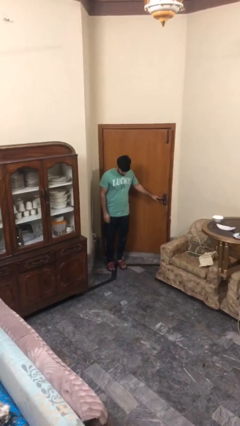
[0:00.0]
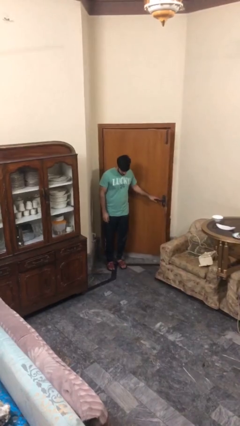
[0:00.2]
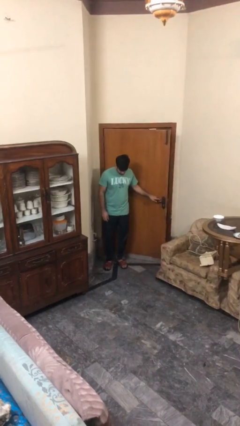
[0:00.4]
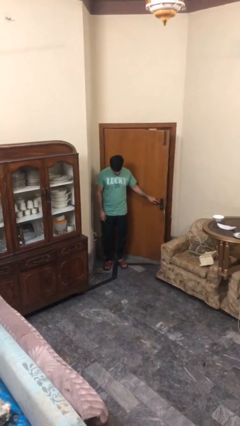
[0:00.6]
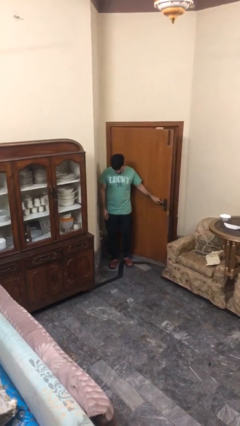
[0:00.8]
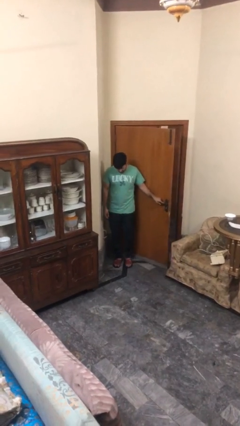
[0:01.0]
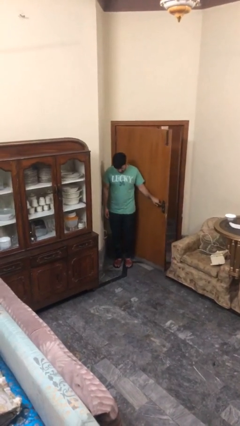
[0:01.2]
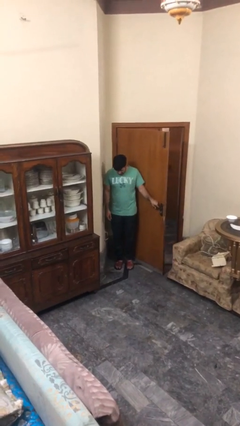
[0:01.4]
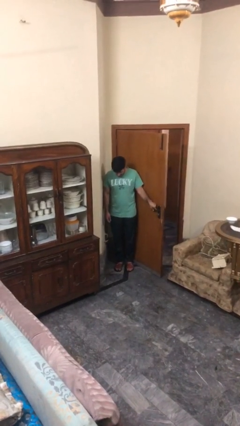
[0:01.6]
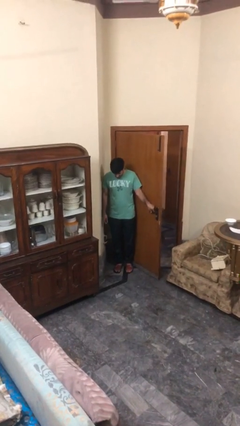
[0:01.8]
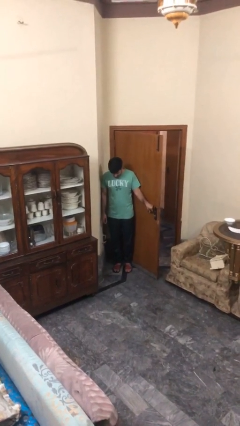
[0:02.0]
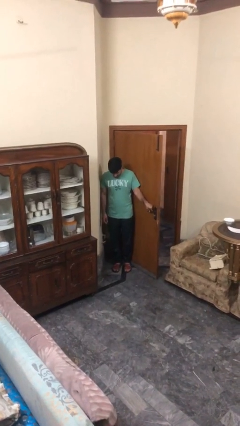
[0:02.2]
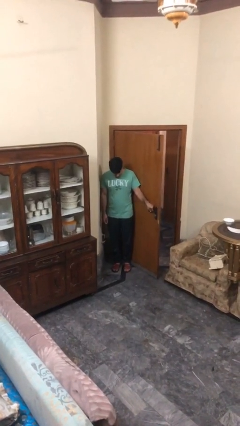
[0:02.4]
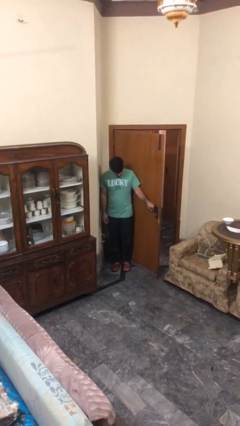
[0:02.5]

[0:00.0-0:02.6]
person opens facility door

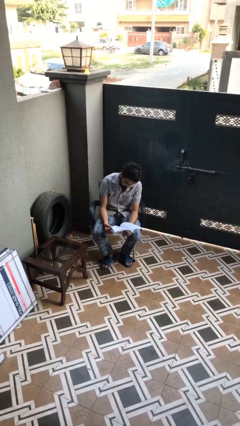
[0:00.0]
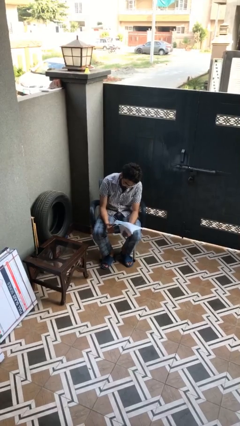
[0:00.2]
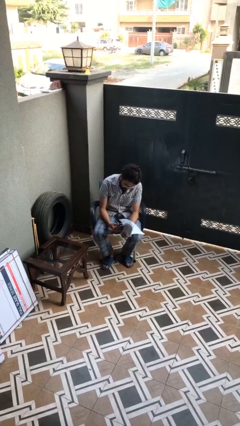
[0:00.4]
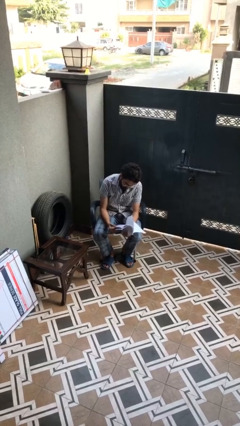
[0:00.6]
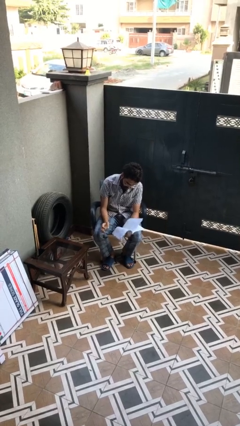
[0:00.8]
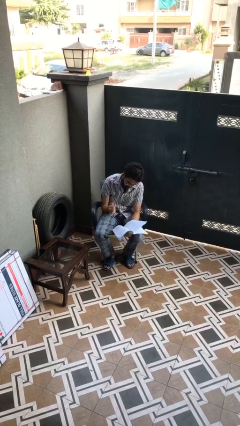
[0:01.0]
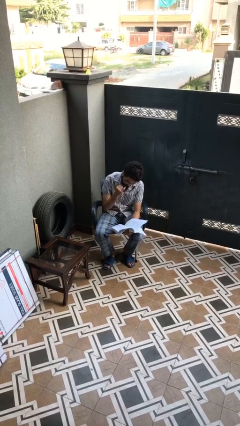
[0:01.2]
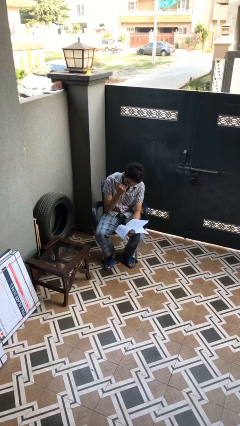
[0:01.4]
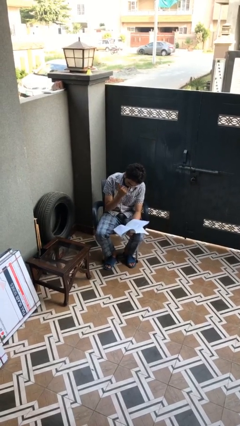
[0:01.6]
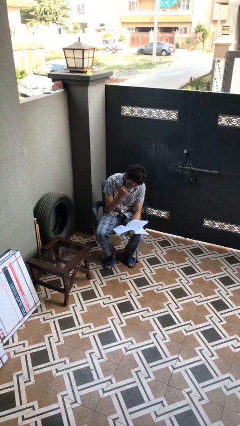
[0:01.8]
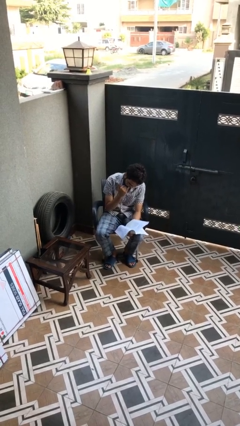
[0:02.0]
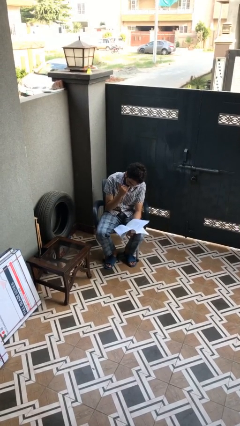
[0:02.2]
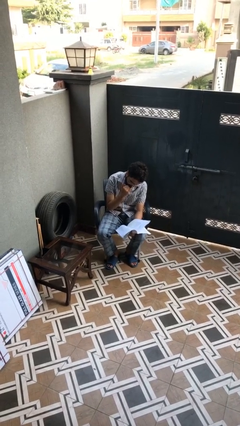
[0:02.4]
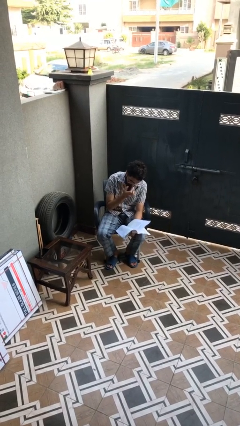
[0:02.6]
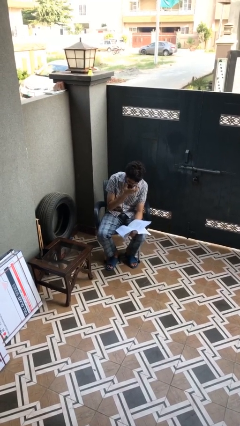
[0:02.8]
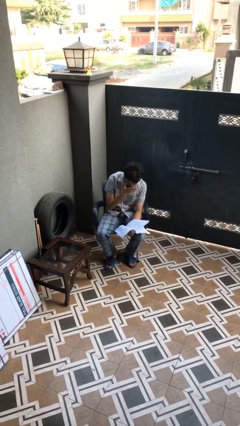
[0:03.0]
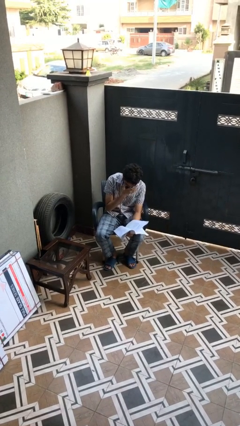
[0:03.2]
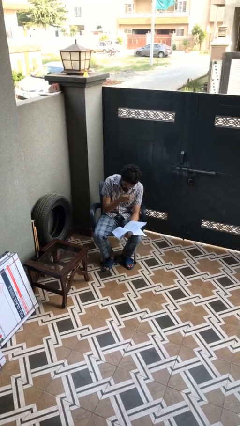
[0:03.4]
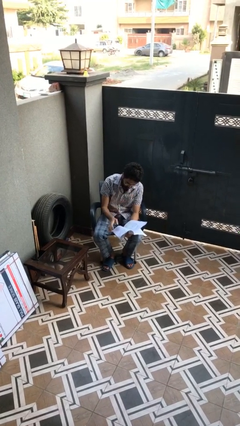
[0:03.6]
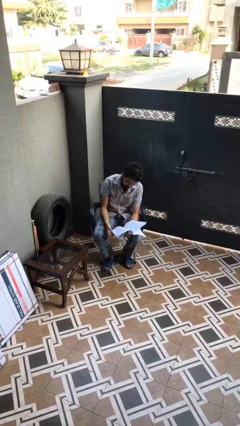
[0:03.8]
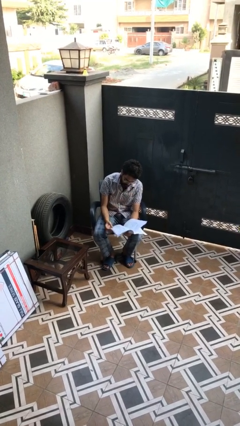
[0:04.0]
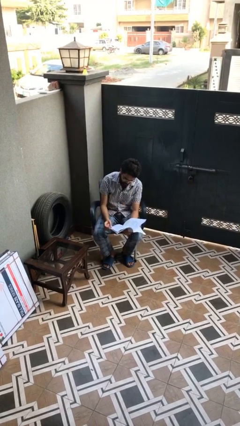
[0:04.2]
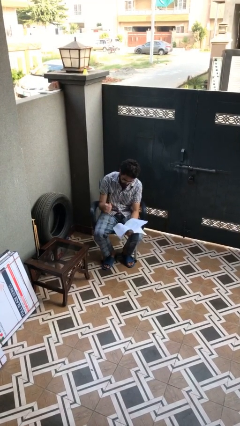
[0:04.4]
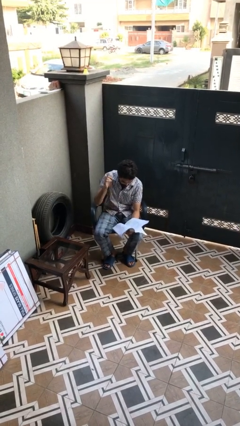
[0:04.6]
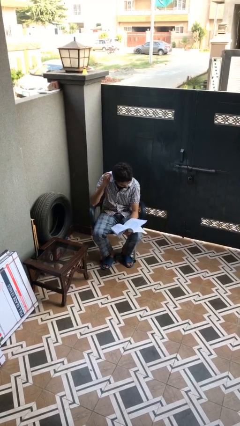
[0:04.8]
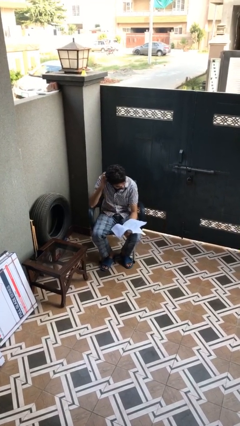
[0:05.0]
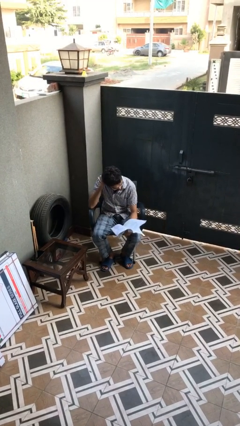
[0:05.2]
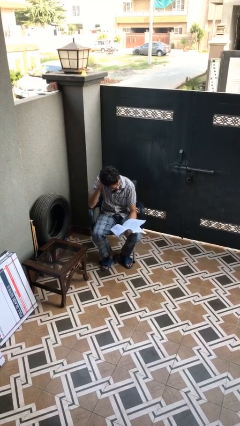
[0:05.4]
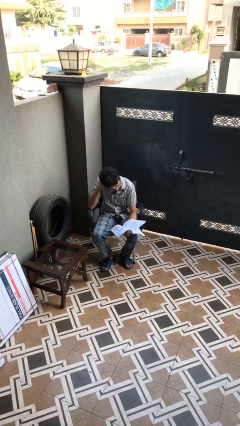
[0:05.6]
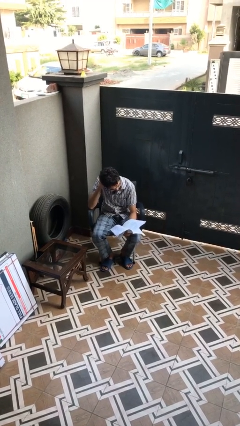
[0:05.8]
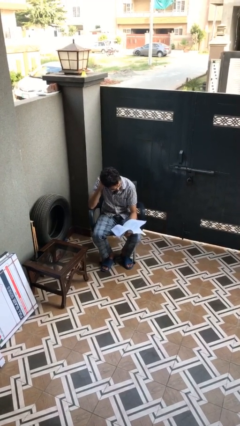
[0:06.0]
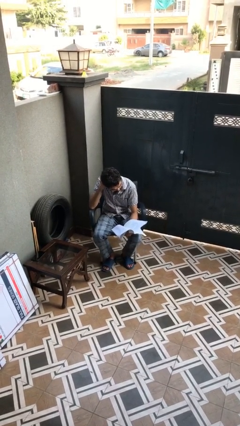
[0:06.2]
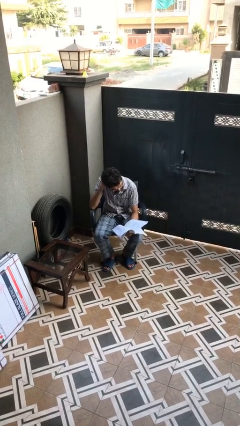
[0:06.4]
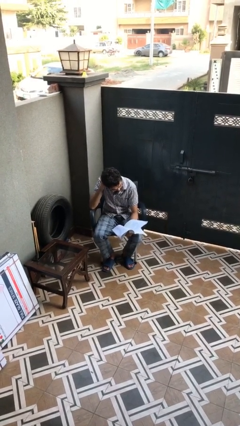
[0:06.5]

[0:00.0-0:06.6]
person reads document

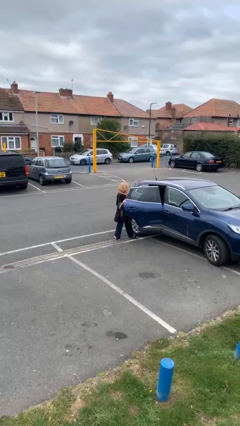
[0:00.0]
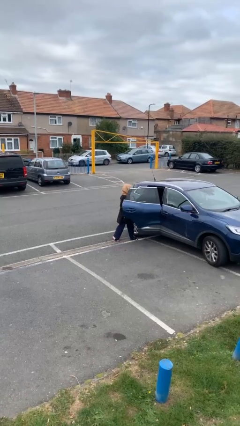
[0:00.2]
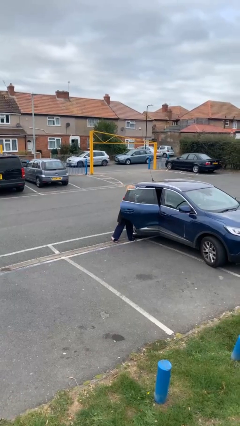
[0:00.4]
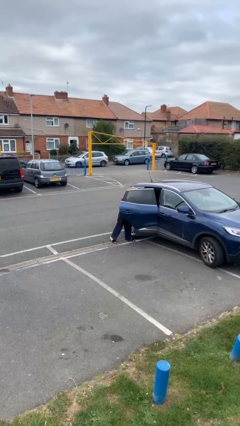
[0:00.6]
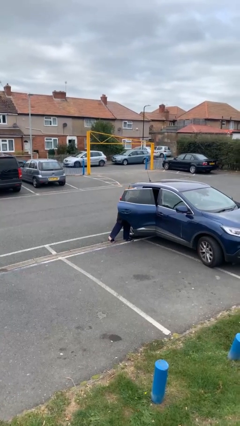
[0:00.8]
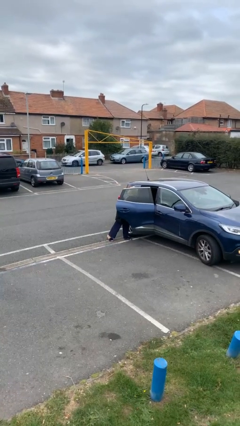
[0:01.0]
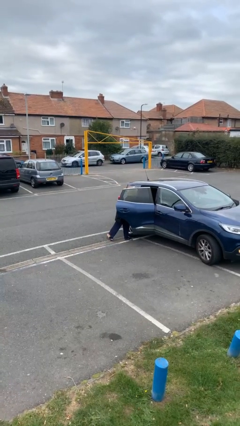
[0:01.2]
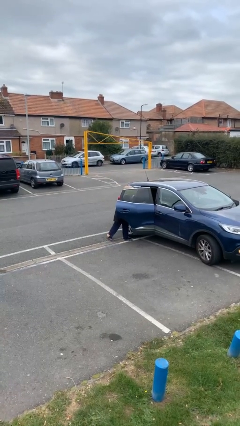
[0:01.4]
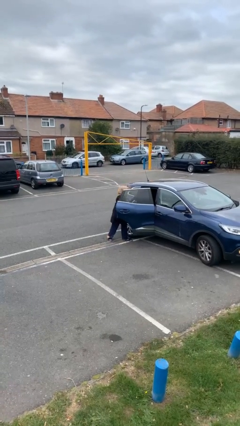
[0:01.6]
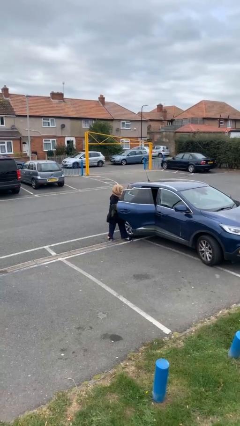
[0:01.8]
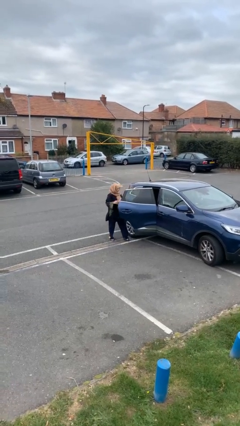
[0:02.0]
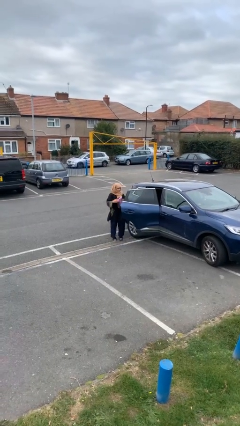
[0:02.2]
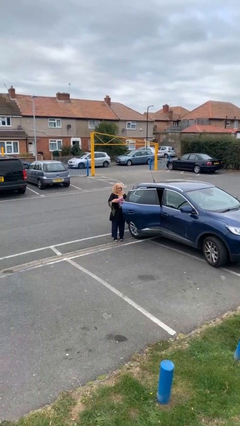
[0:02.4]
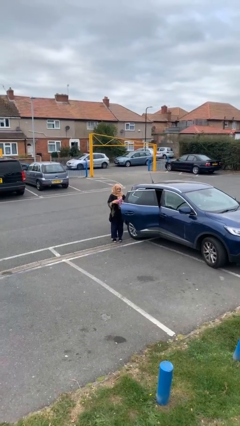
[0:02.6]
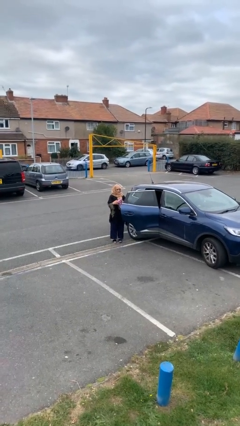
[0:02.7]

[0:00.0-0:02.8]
person unloads car

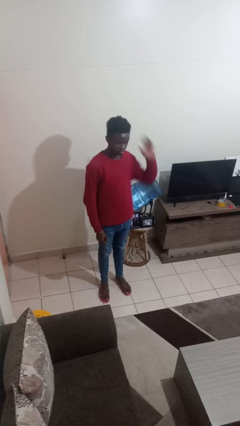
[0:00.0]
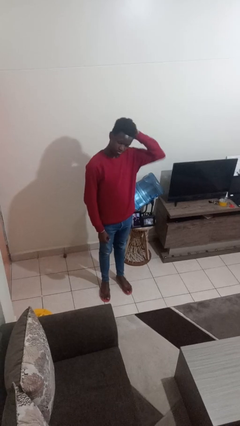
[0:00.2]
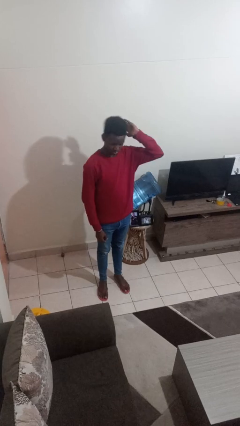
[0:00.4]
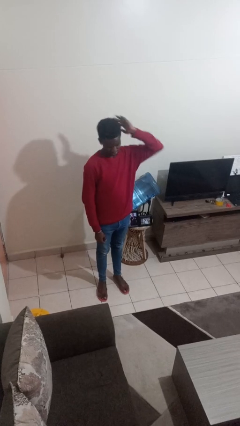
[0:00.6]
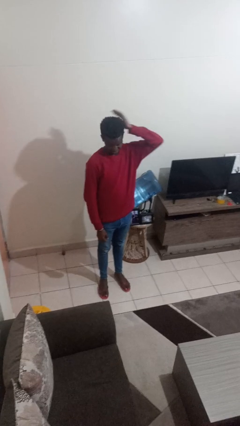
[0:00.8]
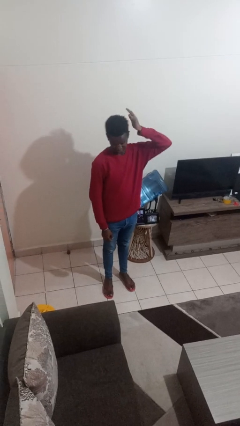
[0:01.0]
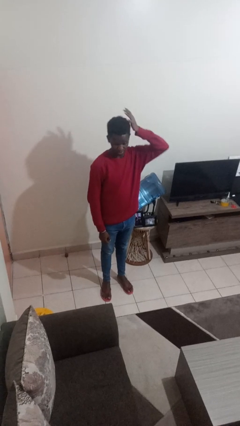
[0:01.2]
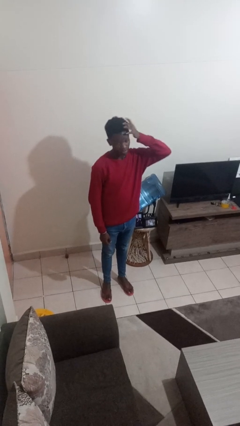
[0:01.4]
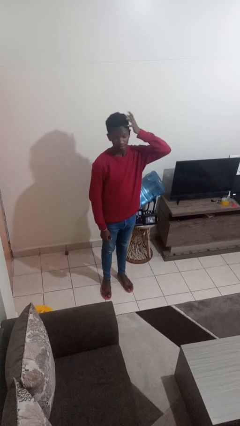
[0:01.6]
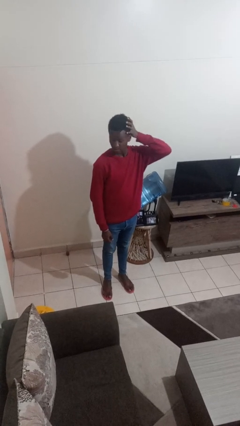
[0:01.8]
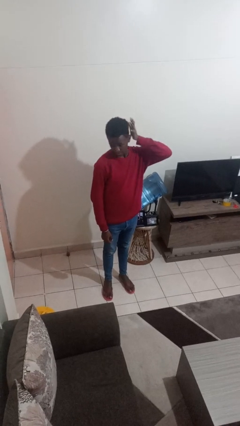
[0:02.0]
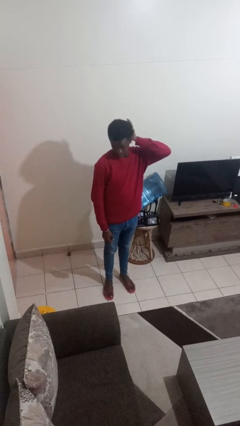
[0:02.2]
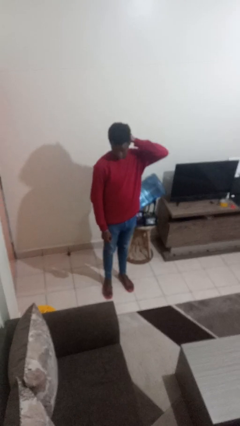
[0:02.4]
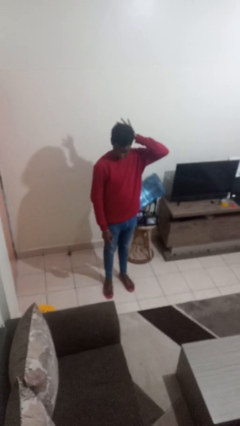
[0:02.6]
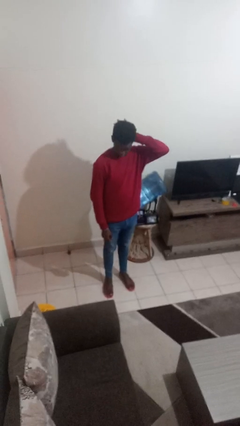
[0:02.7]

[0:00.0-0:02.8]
person pats head

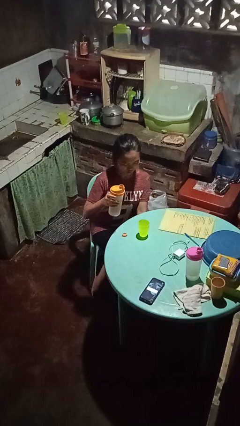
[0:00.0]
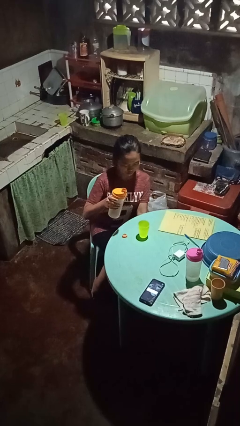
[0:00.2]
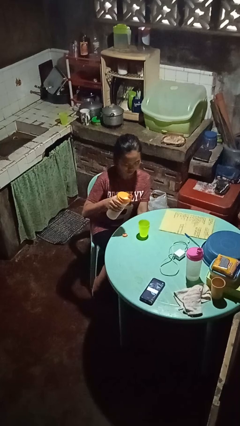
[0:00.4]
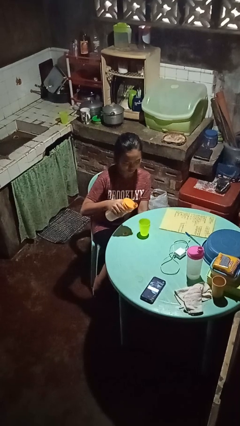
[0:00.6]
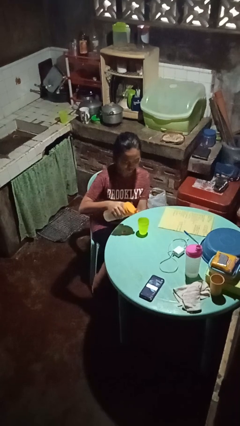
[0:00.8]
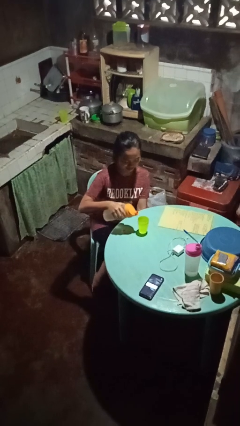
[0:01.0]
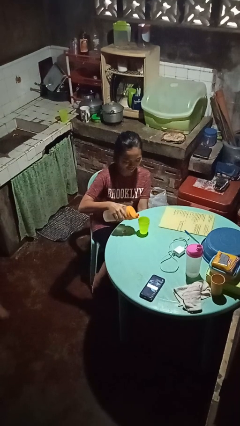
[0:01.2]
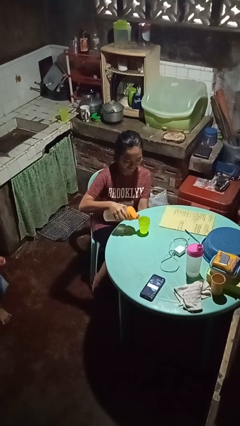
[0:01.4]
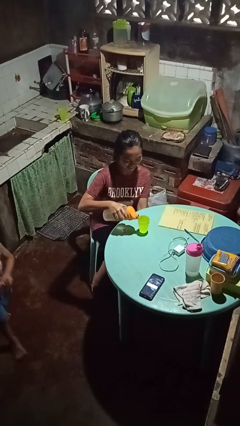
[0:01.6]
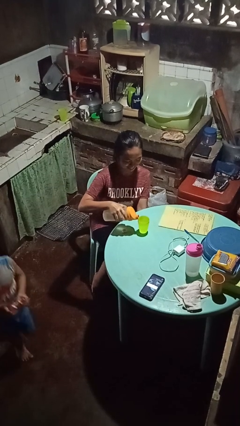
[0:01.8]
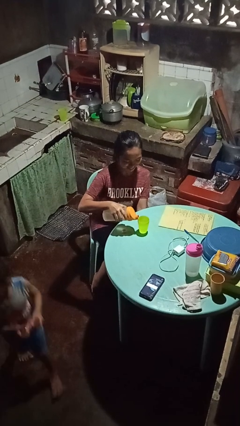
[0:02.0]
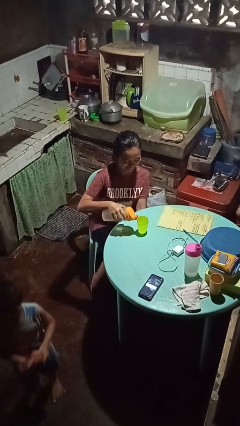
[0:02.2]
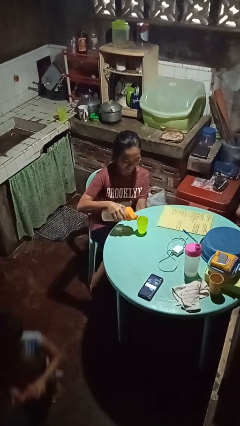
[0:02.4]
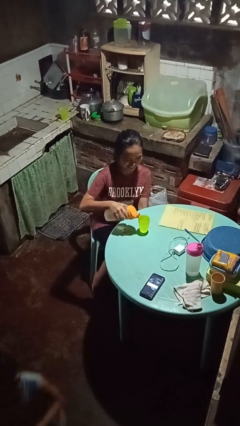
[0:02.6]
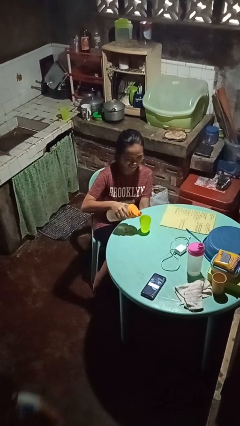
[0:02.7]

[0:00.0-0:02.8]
person pours liquid into cup
